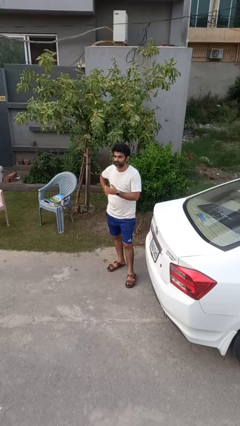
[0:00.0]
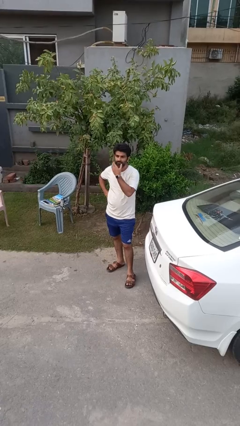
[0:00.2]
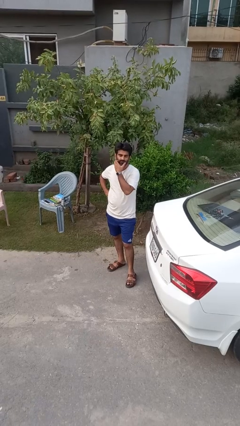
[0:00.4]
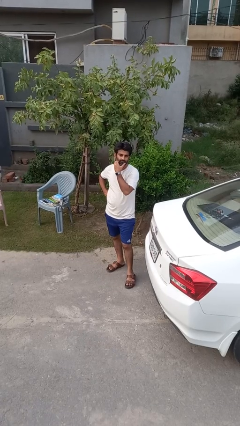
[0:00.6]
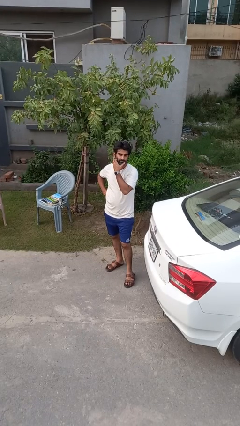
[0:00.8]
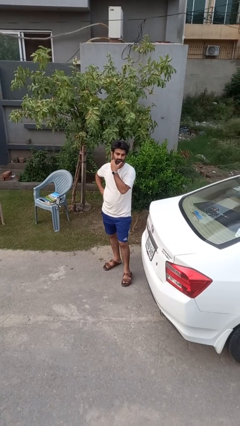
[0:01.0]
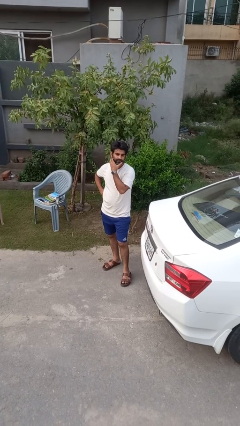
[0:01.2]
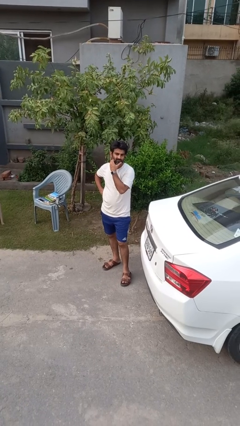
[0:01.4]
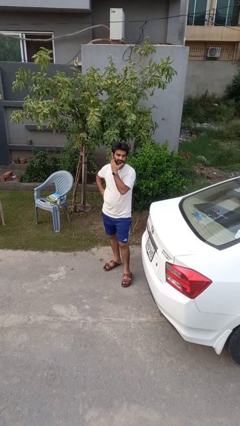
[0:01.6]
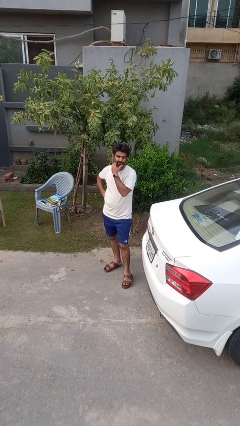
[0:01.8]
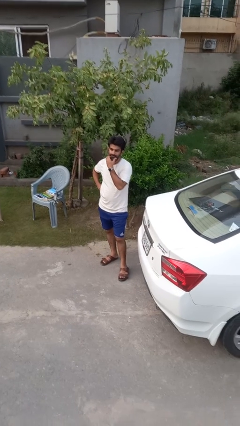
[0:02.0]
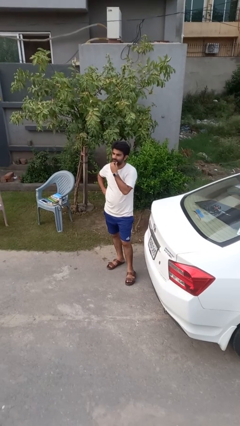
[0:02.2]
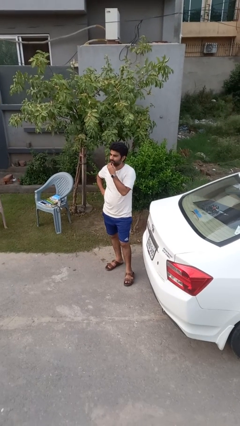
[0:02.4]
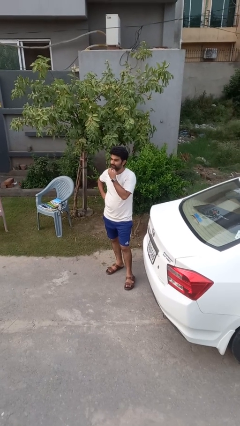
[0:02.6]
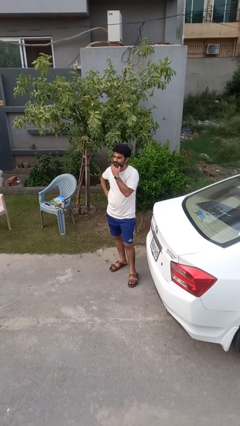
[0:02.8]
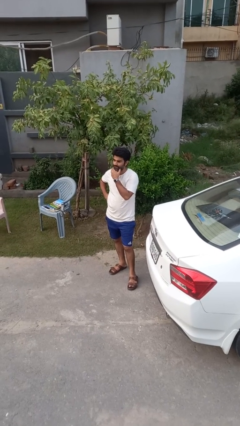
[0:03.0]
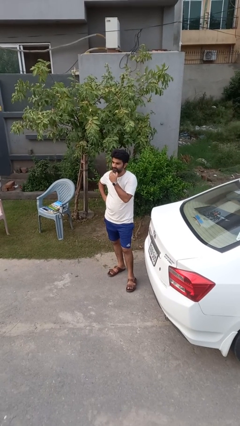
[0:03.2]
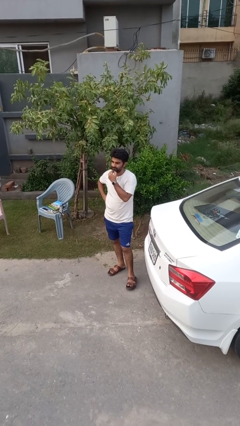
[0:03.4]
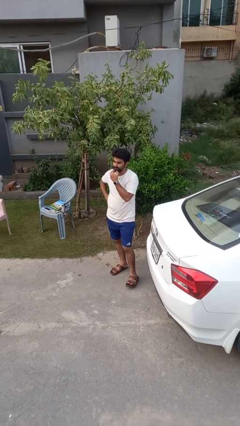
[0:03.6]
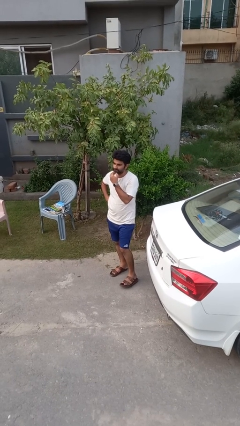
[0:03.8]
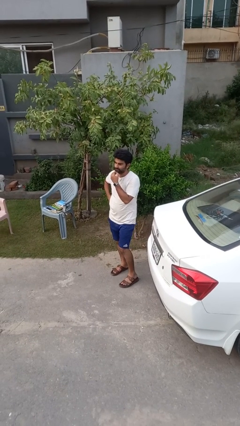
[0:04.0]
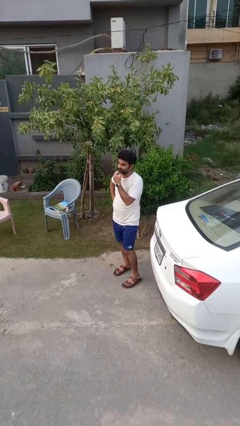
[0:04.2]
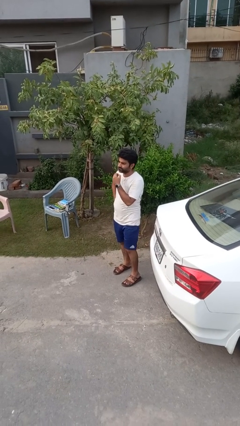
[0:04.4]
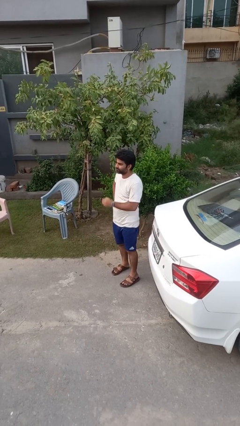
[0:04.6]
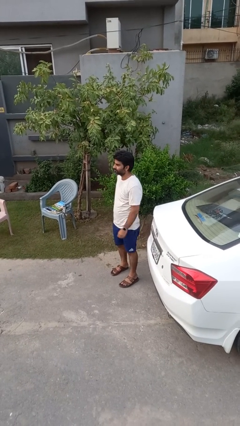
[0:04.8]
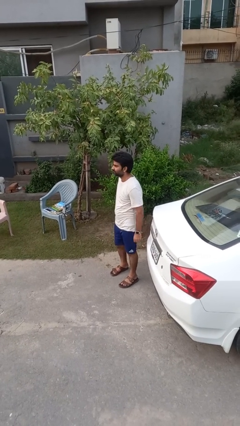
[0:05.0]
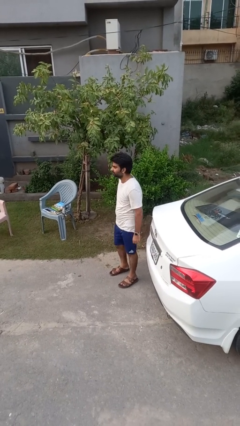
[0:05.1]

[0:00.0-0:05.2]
person scratches face

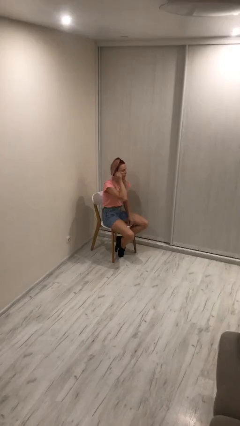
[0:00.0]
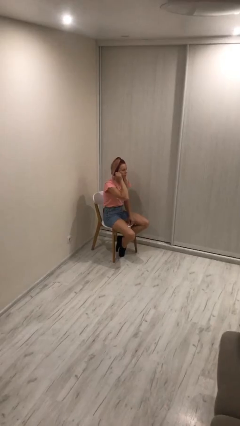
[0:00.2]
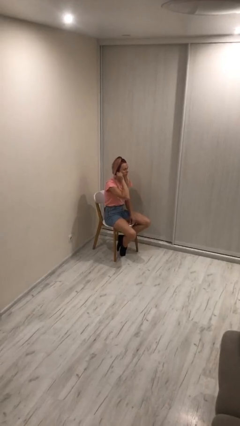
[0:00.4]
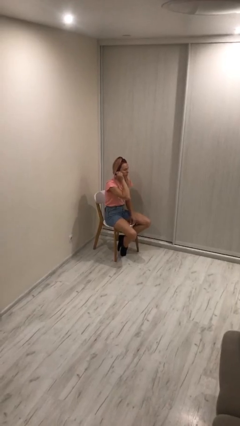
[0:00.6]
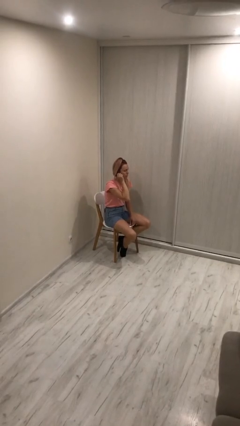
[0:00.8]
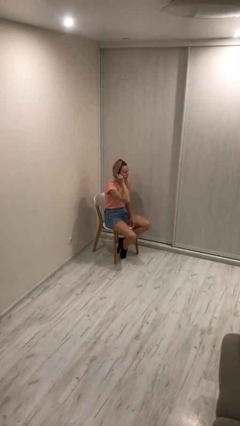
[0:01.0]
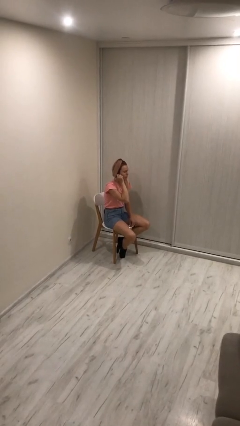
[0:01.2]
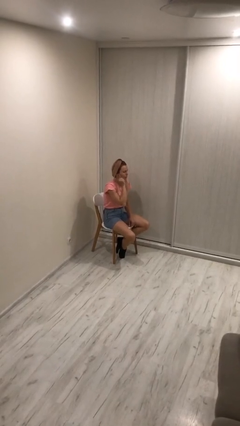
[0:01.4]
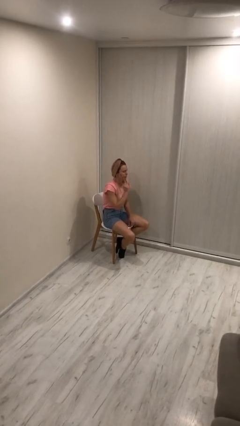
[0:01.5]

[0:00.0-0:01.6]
person touches earlobe

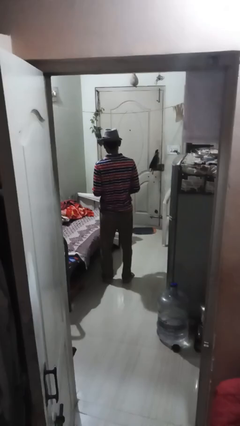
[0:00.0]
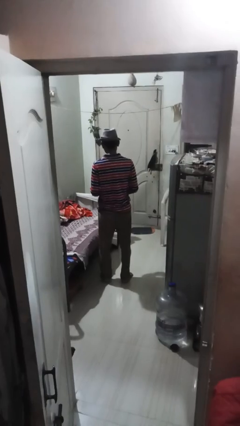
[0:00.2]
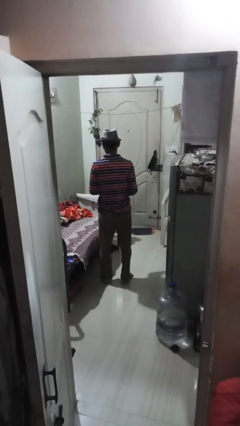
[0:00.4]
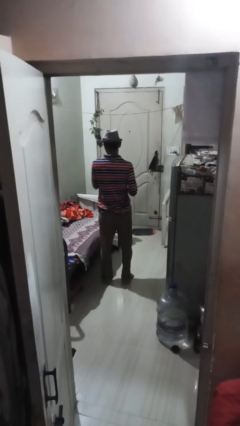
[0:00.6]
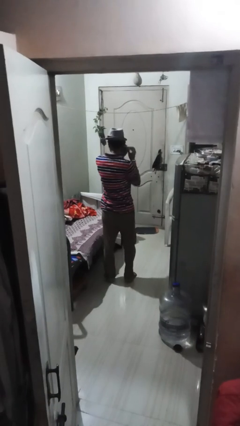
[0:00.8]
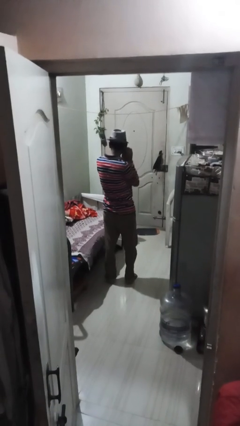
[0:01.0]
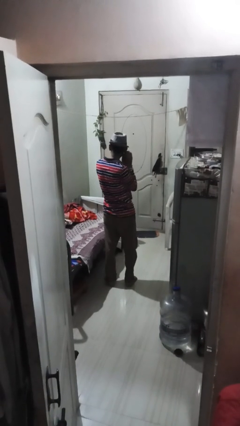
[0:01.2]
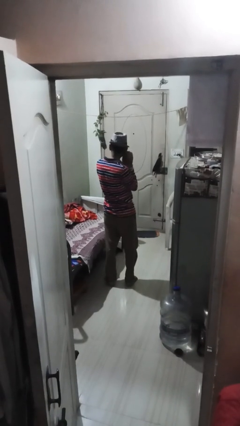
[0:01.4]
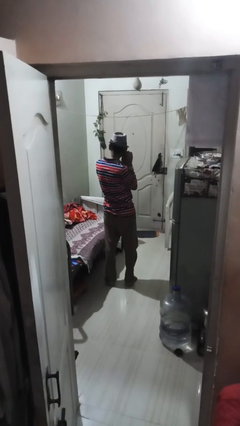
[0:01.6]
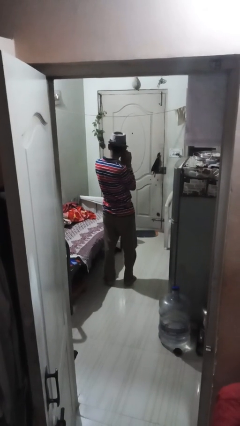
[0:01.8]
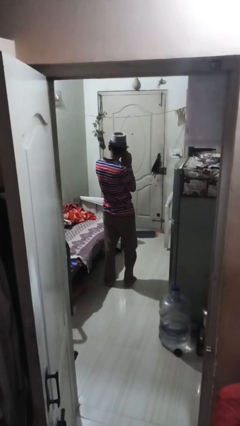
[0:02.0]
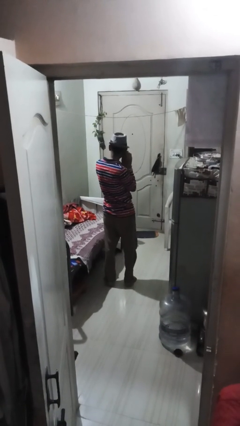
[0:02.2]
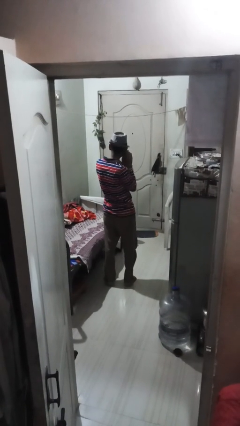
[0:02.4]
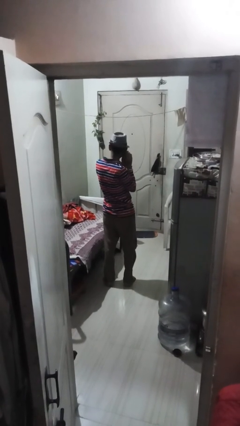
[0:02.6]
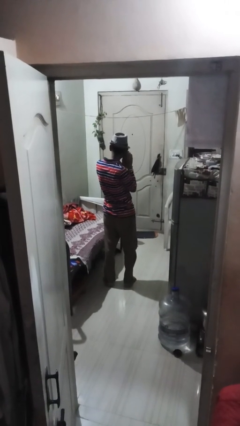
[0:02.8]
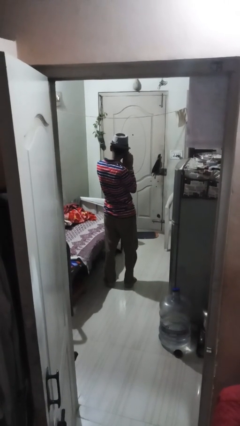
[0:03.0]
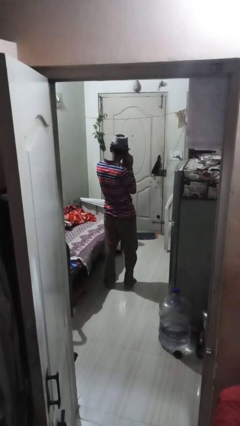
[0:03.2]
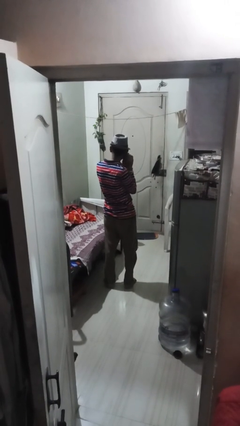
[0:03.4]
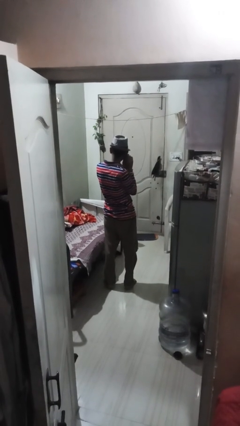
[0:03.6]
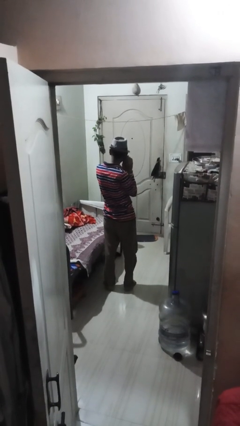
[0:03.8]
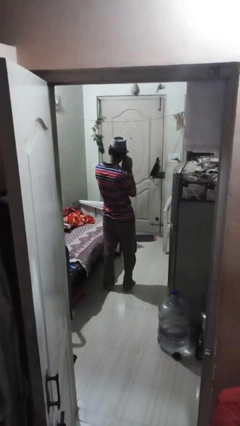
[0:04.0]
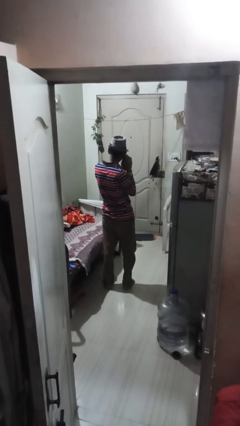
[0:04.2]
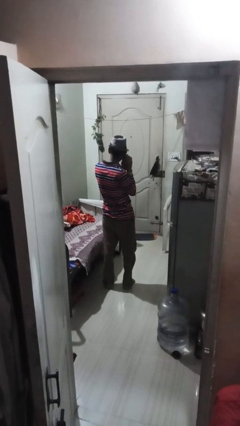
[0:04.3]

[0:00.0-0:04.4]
person puts on earrings

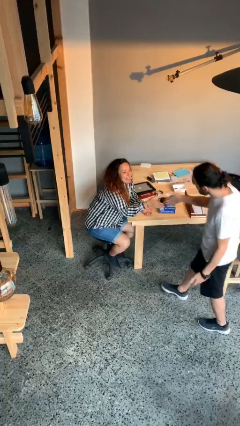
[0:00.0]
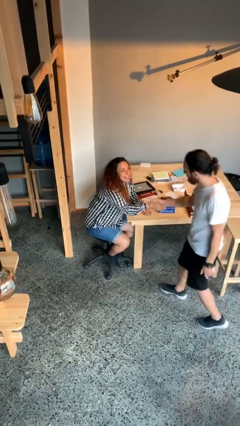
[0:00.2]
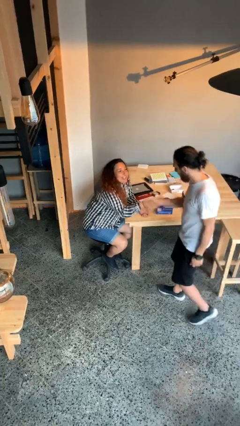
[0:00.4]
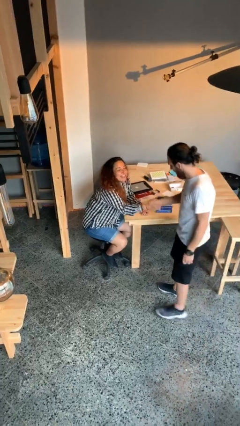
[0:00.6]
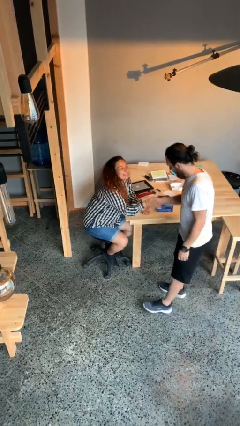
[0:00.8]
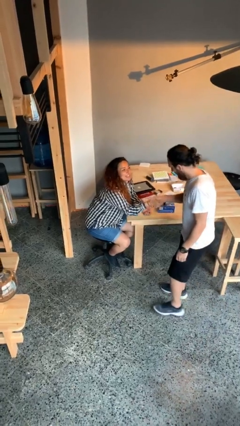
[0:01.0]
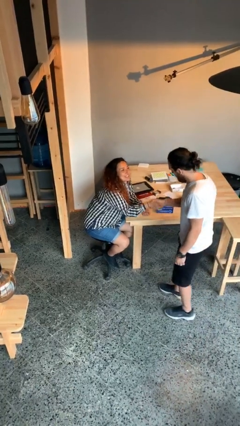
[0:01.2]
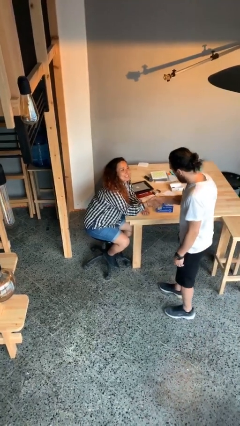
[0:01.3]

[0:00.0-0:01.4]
person shakes hand

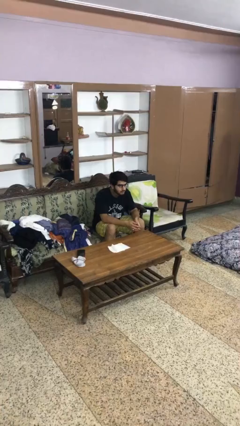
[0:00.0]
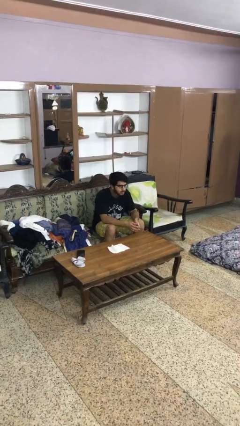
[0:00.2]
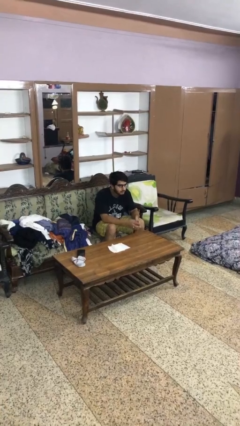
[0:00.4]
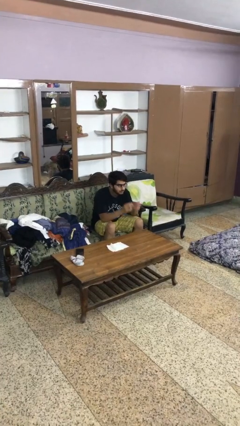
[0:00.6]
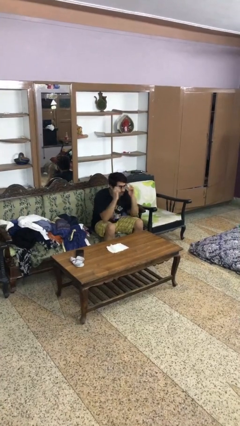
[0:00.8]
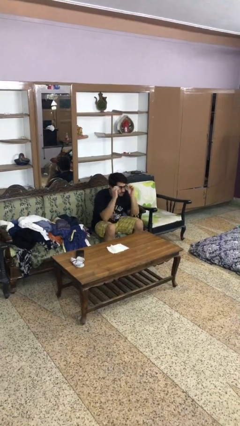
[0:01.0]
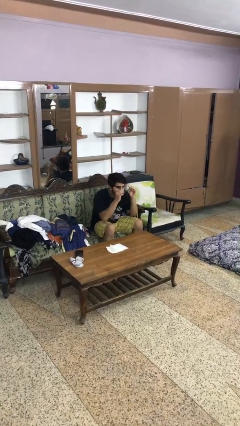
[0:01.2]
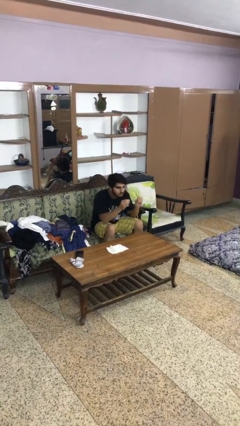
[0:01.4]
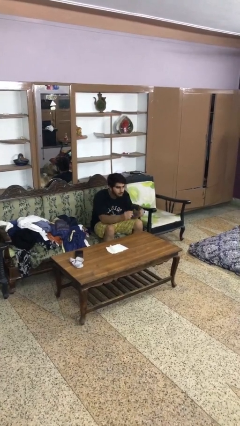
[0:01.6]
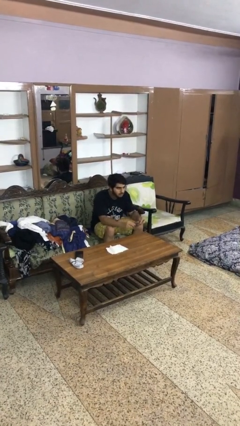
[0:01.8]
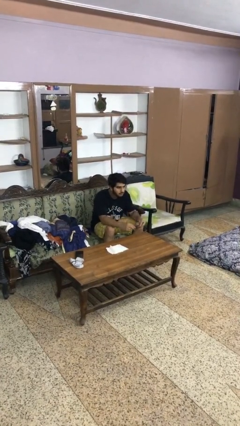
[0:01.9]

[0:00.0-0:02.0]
person takes off glasses

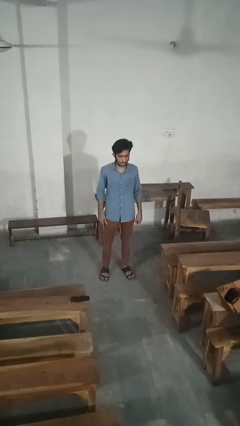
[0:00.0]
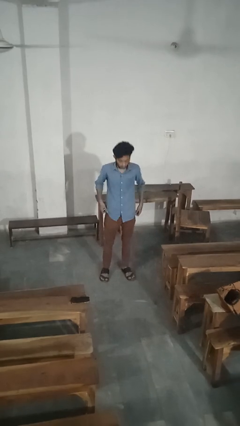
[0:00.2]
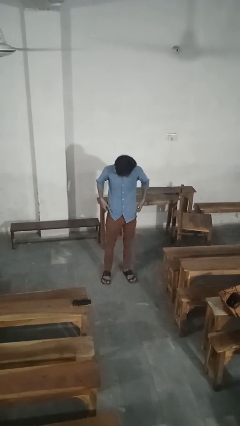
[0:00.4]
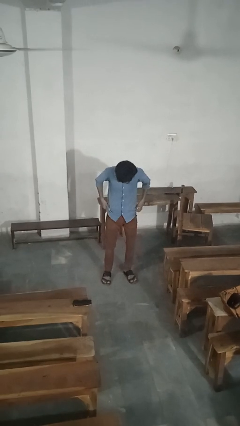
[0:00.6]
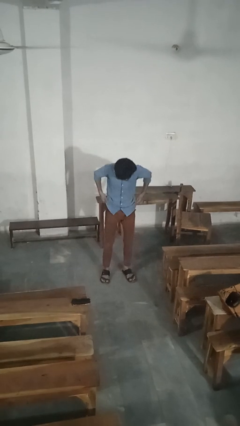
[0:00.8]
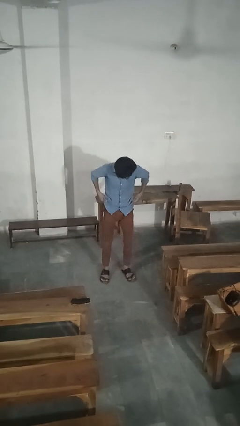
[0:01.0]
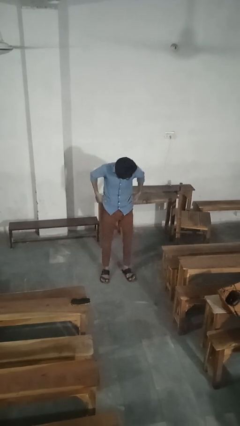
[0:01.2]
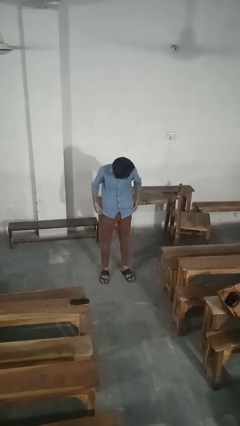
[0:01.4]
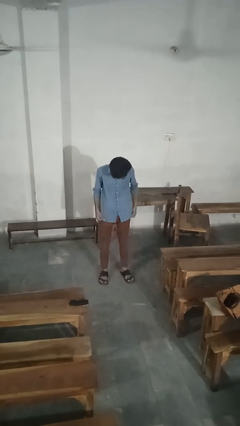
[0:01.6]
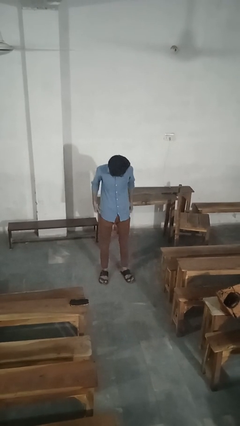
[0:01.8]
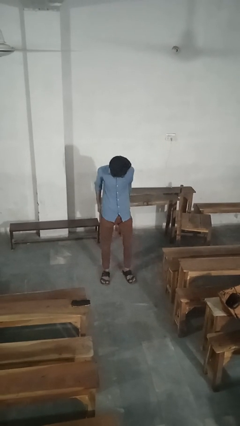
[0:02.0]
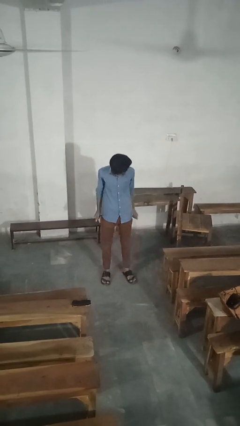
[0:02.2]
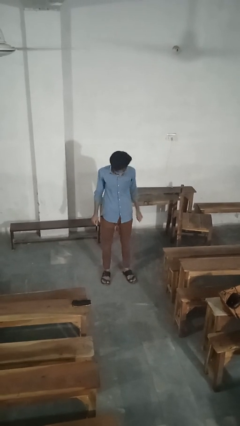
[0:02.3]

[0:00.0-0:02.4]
person hikes up pants

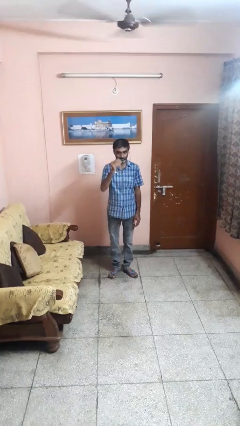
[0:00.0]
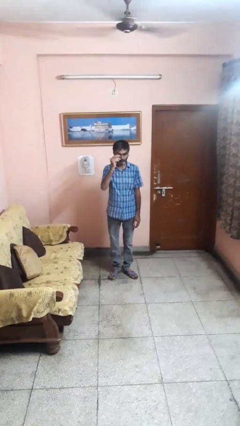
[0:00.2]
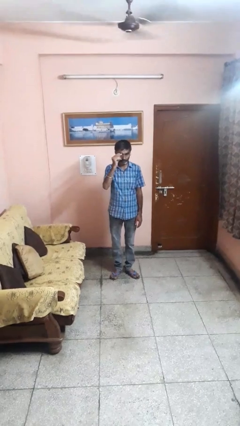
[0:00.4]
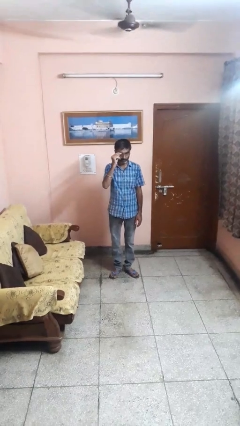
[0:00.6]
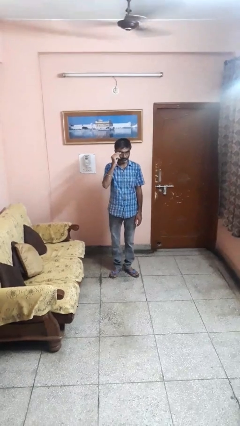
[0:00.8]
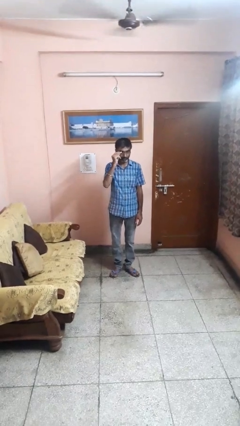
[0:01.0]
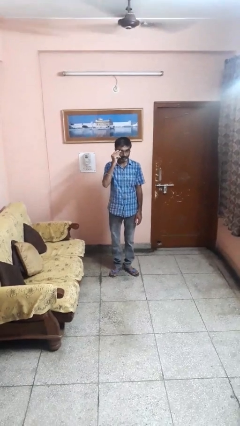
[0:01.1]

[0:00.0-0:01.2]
person puts on glasses
